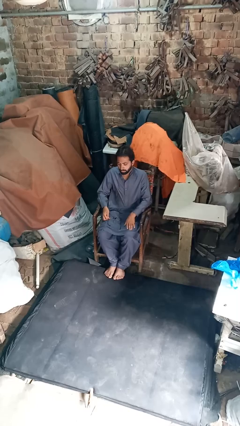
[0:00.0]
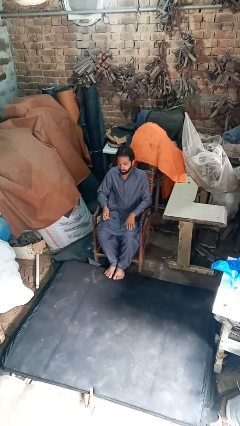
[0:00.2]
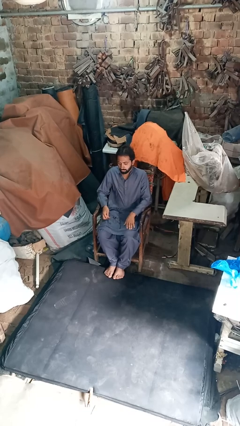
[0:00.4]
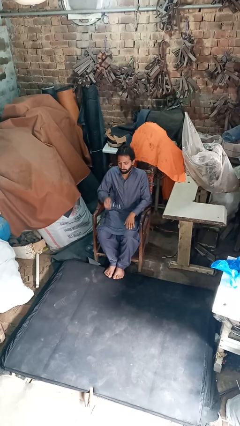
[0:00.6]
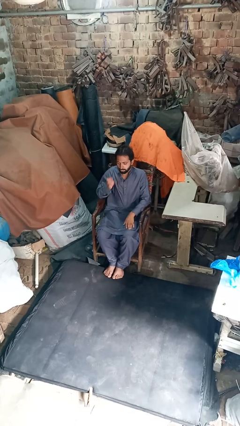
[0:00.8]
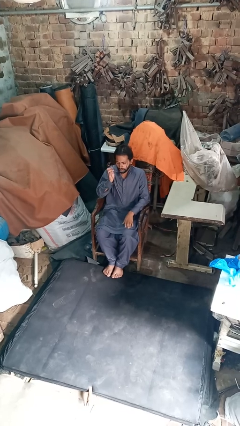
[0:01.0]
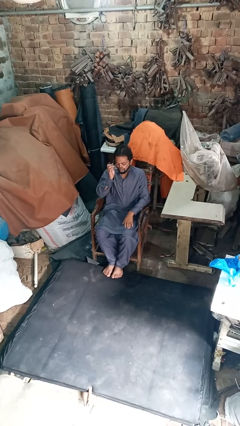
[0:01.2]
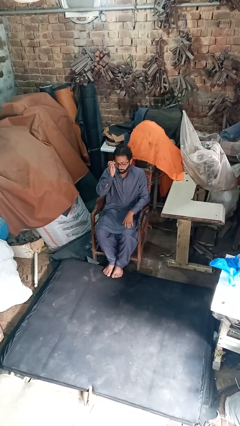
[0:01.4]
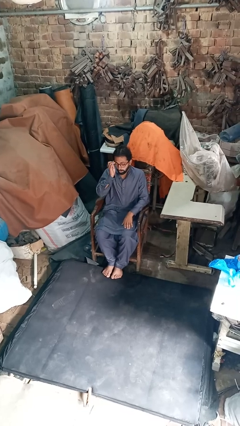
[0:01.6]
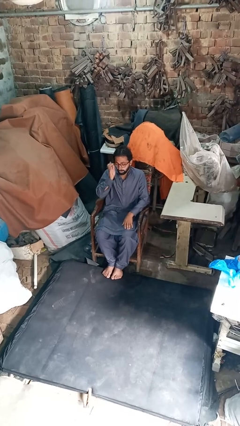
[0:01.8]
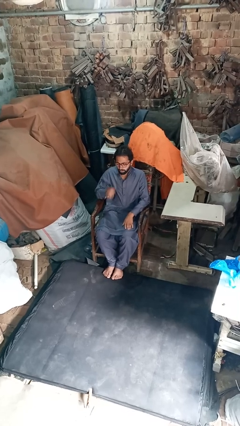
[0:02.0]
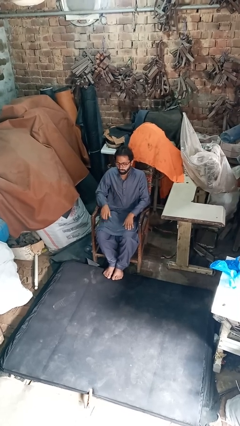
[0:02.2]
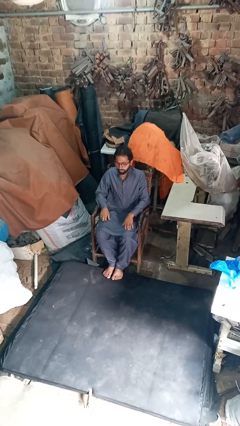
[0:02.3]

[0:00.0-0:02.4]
person puts on glasses

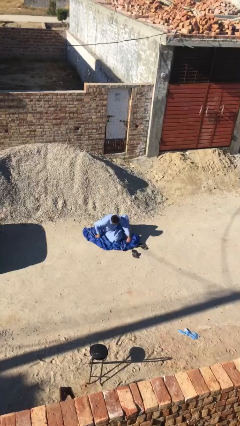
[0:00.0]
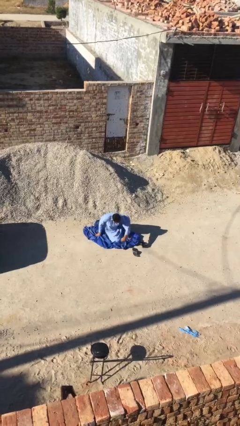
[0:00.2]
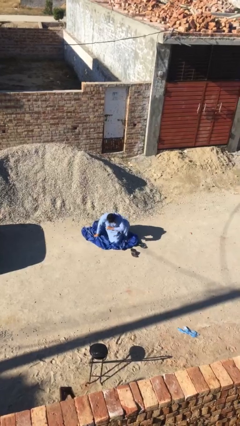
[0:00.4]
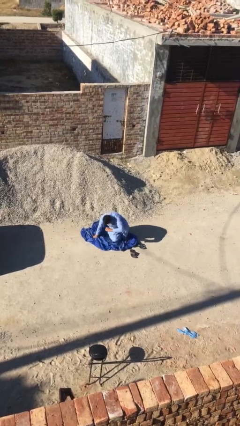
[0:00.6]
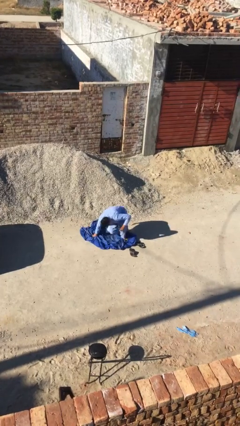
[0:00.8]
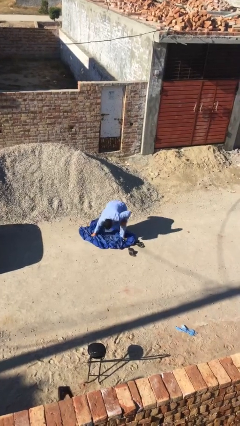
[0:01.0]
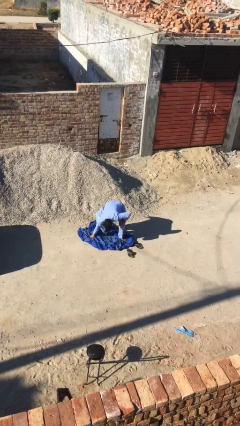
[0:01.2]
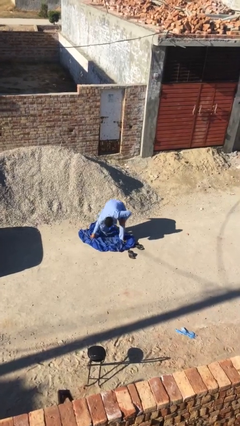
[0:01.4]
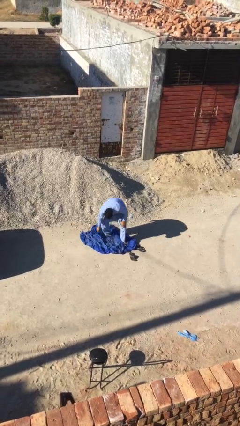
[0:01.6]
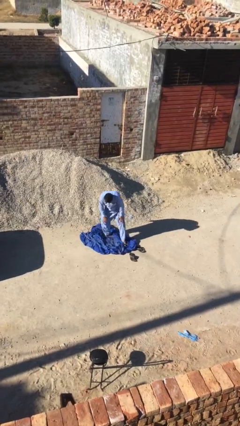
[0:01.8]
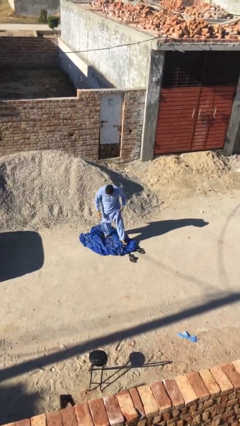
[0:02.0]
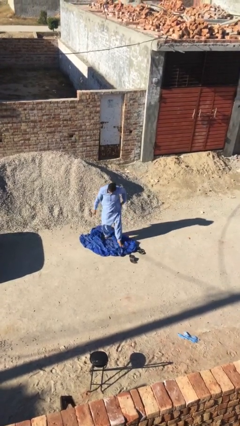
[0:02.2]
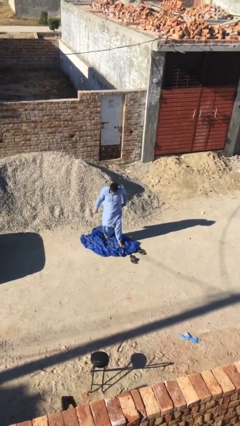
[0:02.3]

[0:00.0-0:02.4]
person stands up

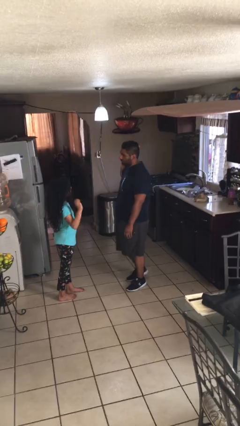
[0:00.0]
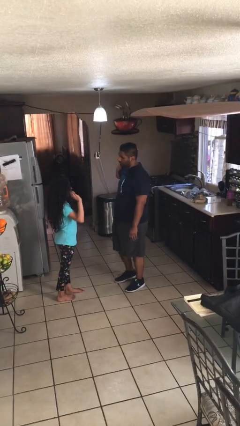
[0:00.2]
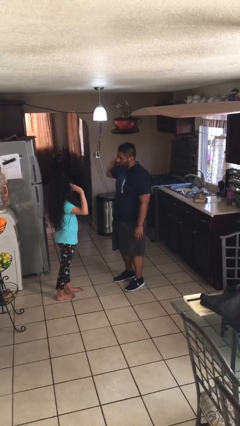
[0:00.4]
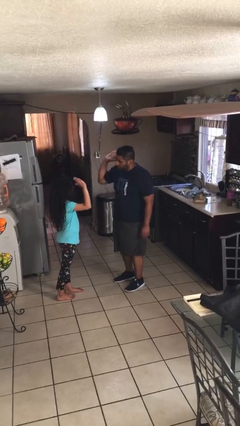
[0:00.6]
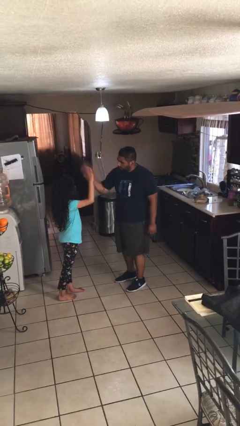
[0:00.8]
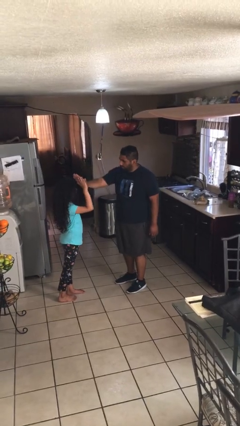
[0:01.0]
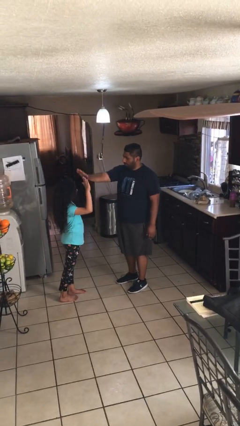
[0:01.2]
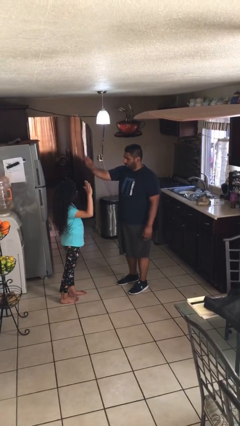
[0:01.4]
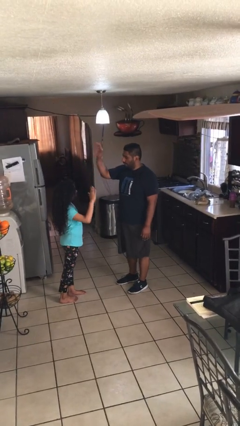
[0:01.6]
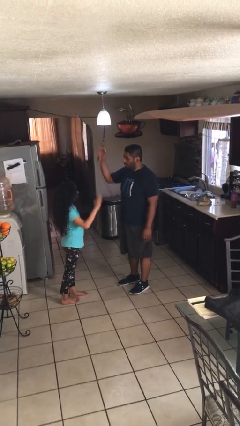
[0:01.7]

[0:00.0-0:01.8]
person highfives hand

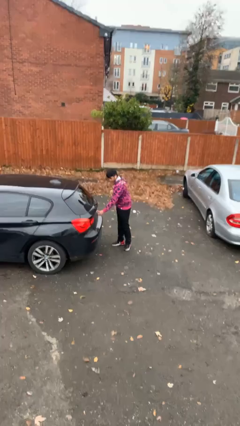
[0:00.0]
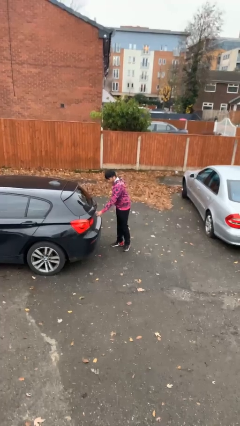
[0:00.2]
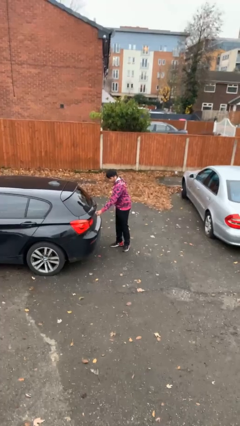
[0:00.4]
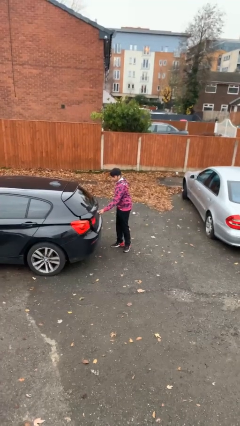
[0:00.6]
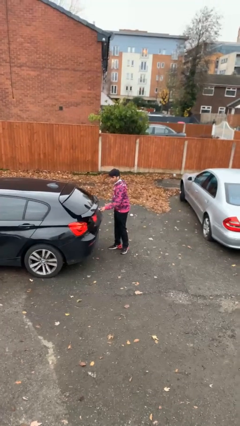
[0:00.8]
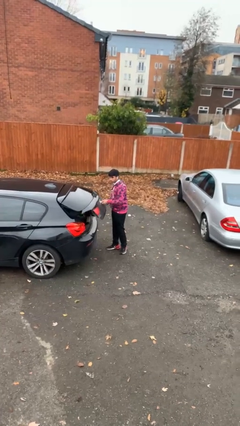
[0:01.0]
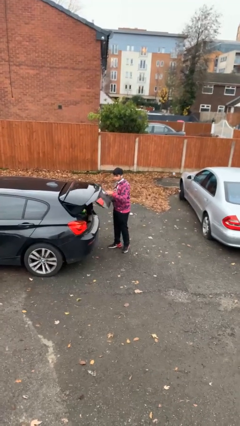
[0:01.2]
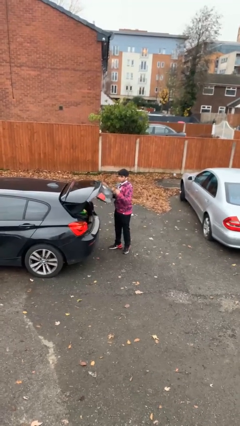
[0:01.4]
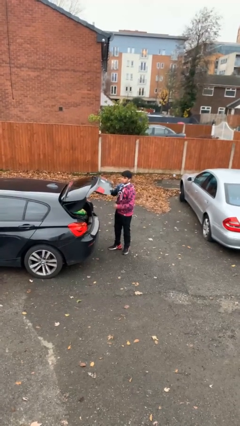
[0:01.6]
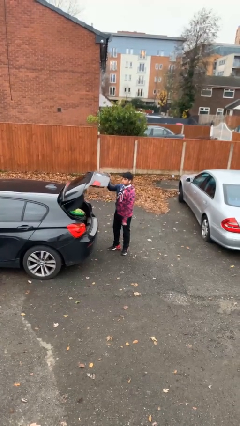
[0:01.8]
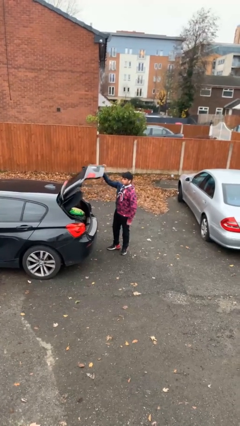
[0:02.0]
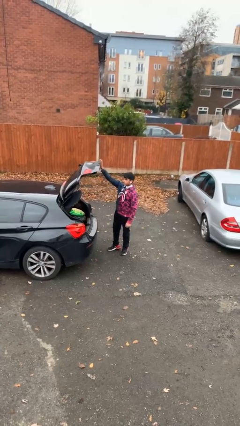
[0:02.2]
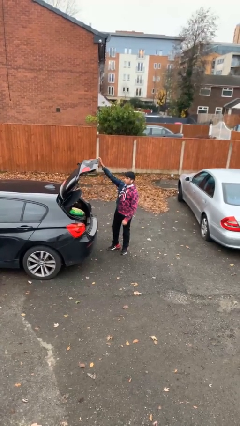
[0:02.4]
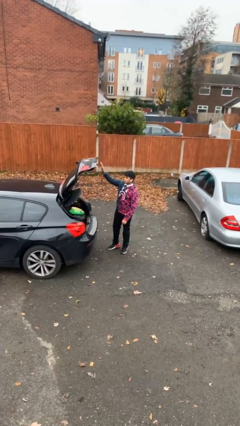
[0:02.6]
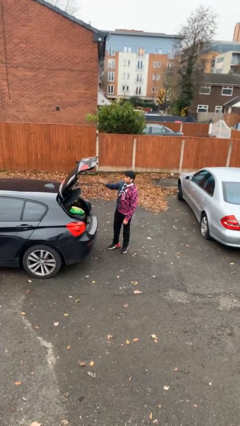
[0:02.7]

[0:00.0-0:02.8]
person opens car trunk

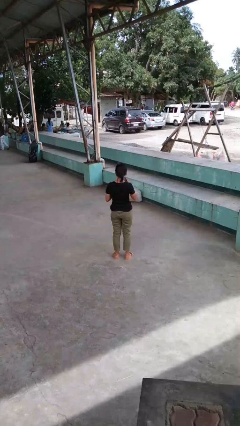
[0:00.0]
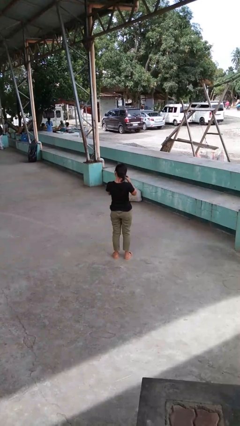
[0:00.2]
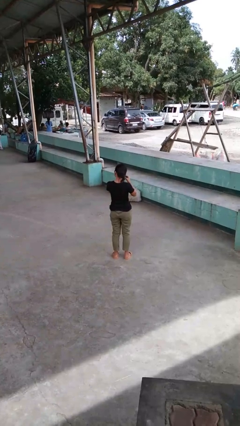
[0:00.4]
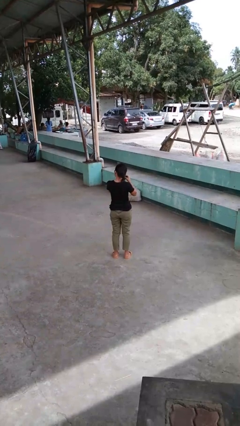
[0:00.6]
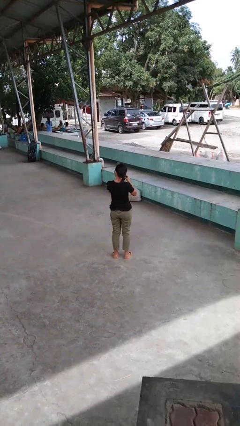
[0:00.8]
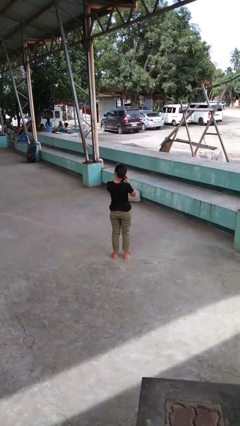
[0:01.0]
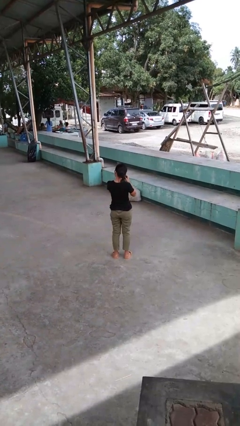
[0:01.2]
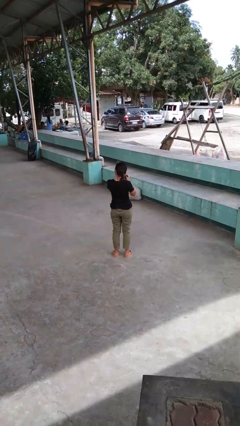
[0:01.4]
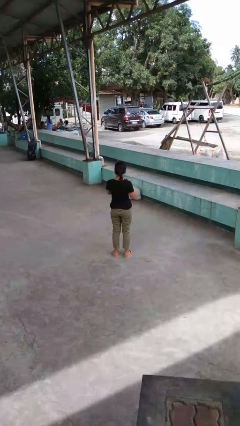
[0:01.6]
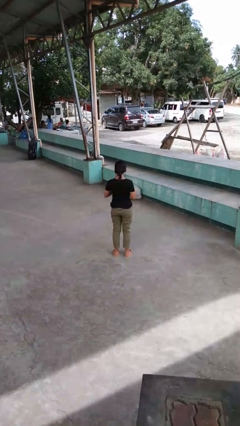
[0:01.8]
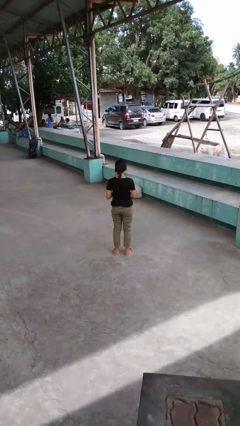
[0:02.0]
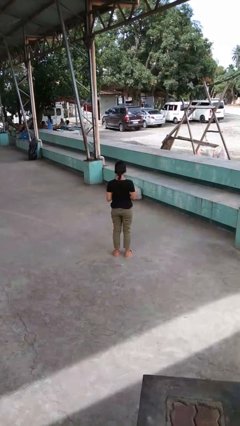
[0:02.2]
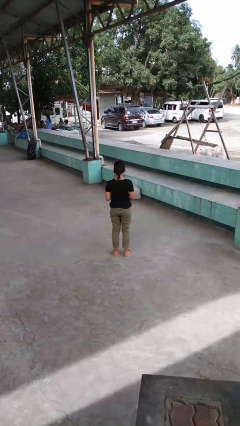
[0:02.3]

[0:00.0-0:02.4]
person takes off earrings

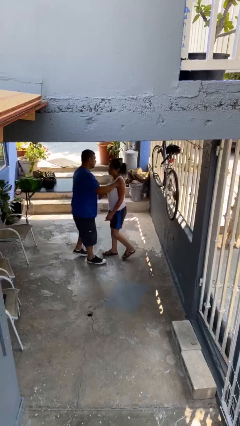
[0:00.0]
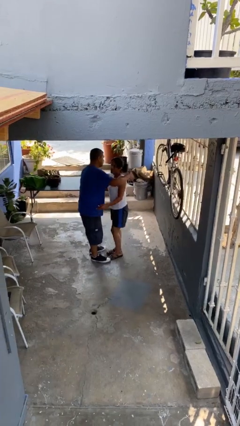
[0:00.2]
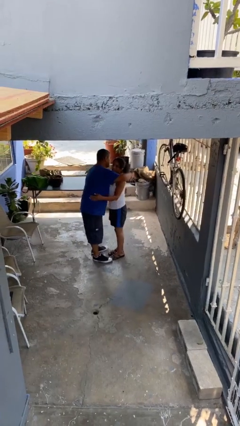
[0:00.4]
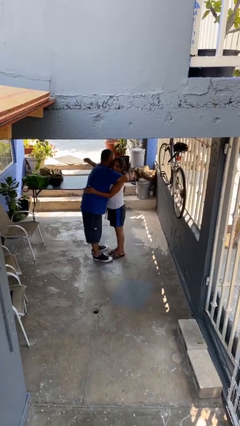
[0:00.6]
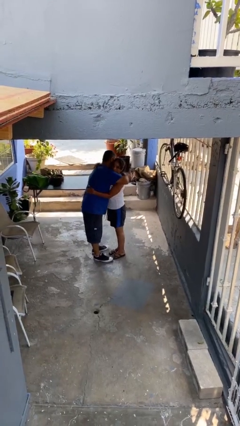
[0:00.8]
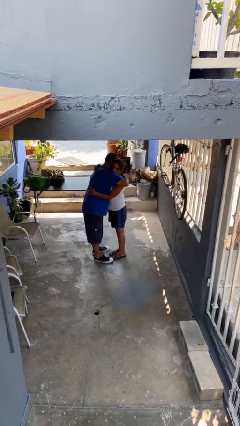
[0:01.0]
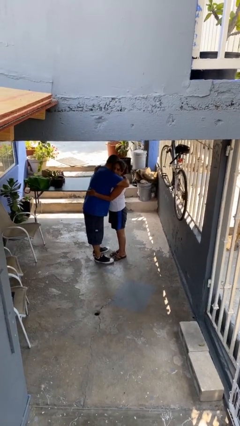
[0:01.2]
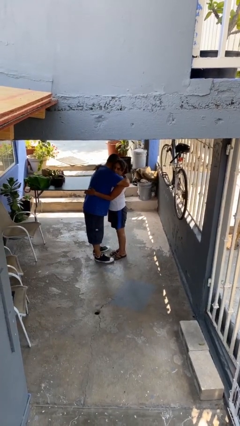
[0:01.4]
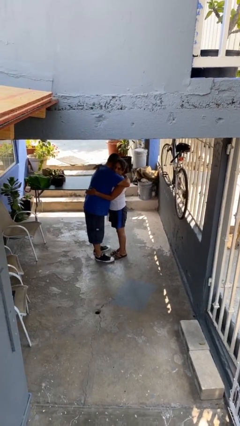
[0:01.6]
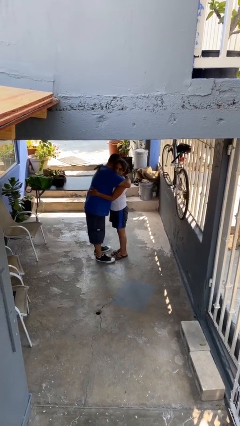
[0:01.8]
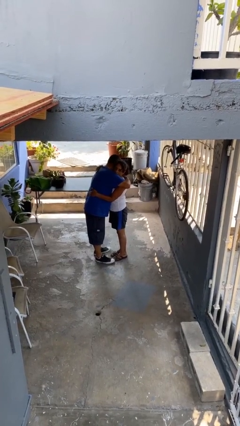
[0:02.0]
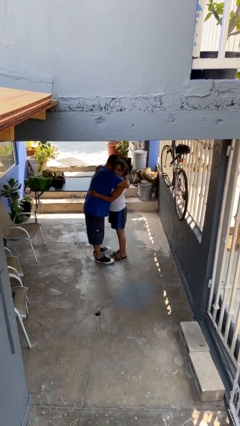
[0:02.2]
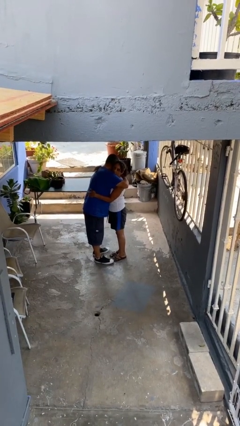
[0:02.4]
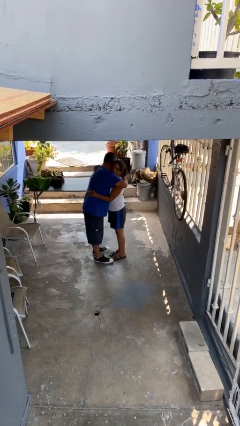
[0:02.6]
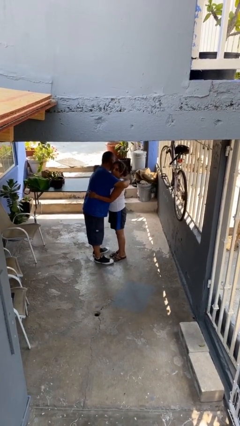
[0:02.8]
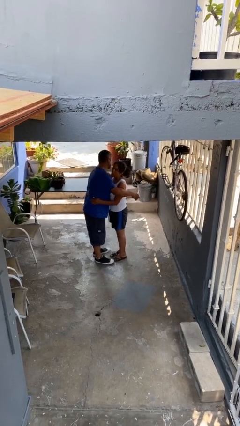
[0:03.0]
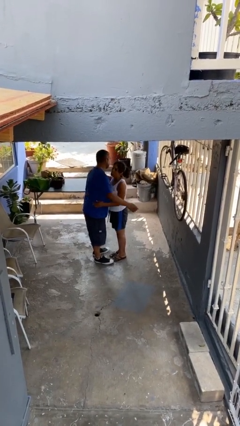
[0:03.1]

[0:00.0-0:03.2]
person embraces person

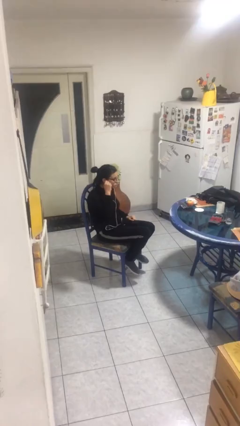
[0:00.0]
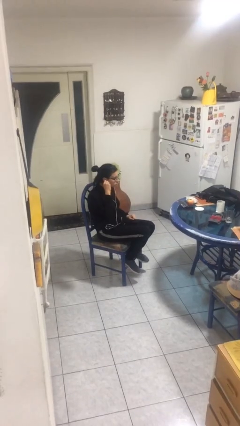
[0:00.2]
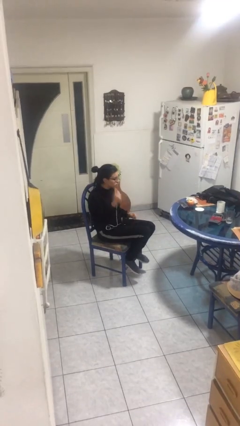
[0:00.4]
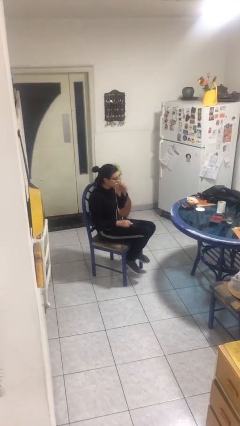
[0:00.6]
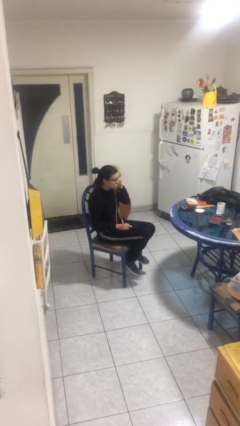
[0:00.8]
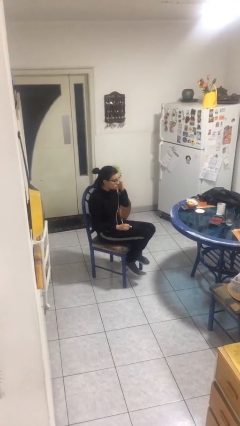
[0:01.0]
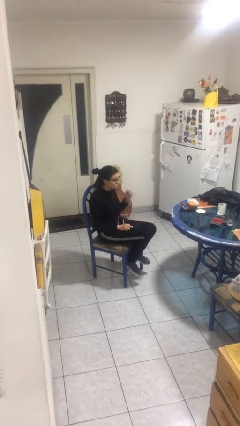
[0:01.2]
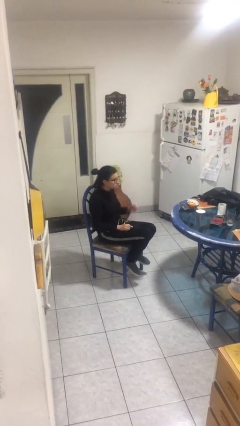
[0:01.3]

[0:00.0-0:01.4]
person takes off headphones

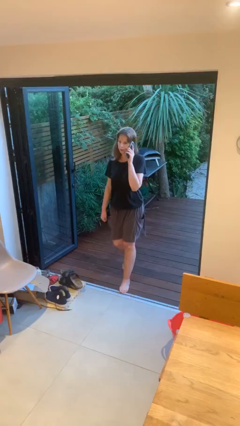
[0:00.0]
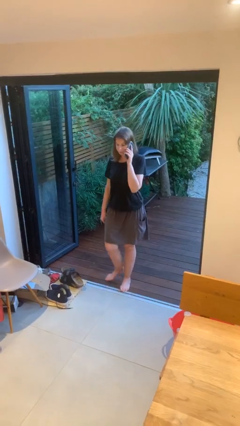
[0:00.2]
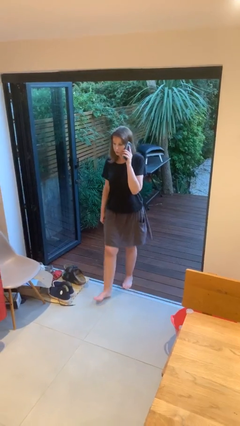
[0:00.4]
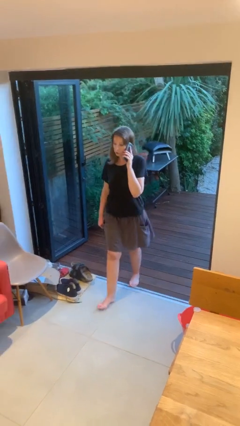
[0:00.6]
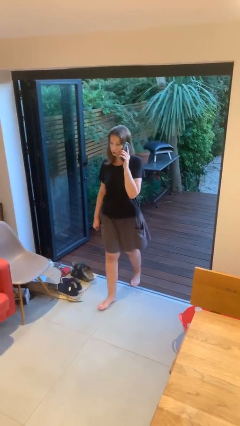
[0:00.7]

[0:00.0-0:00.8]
person enters scene through structure
